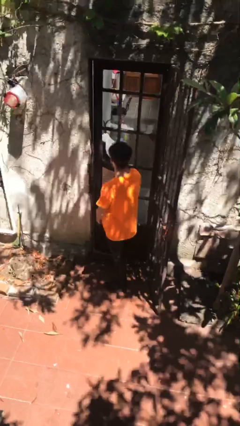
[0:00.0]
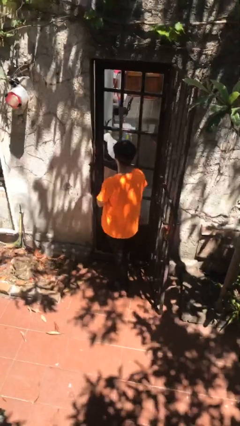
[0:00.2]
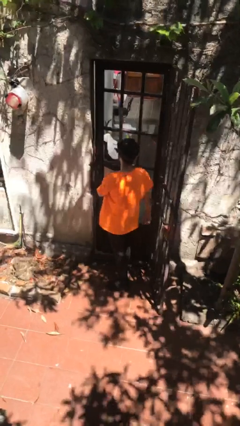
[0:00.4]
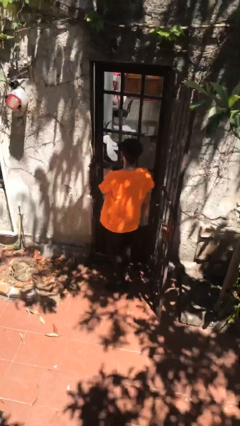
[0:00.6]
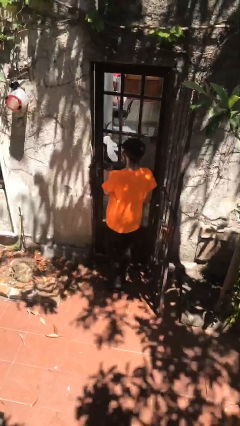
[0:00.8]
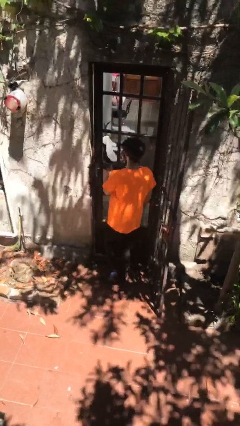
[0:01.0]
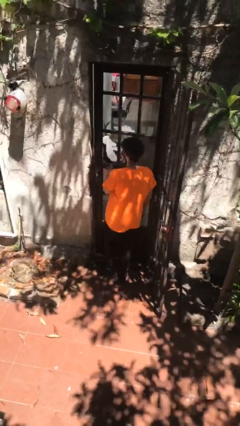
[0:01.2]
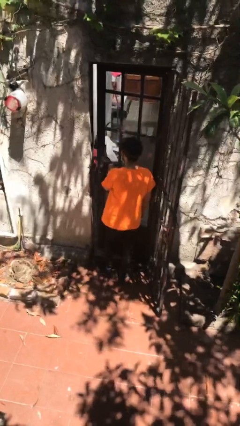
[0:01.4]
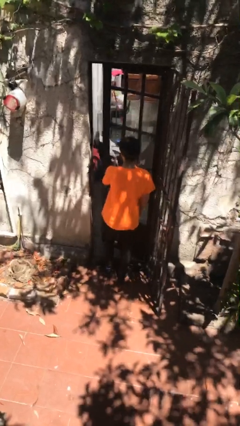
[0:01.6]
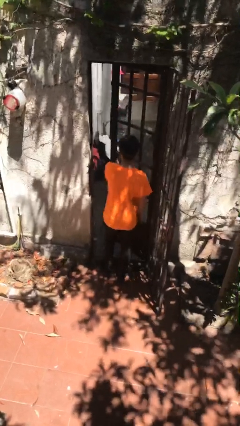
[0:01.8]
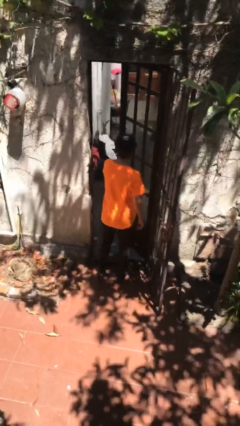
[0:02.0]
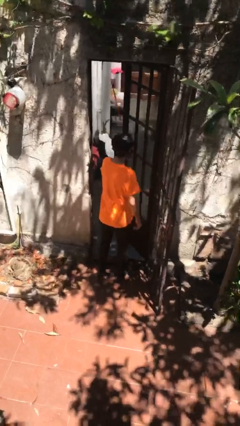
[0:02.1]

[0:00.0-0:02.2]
person opens facility door

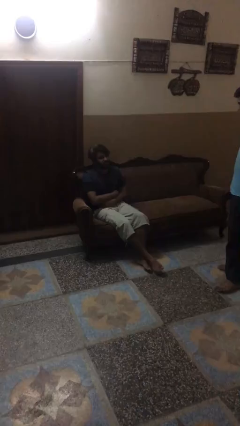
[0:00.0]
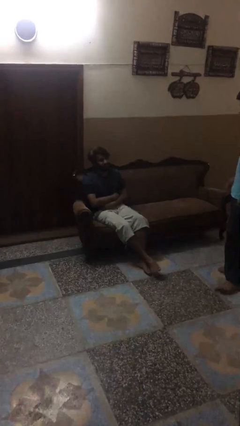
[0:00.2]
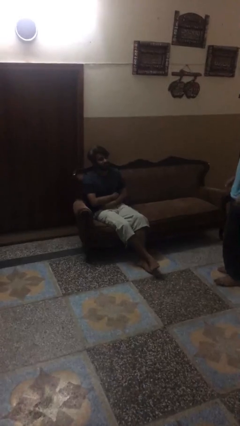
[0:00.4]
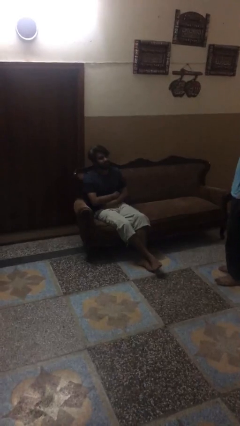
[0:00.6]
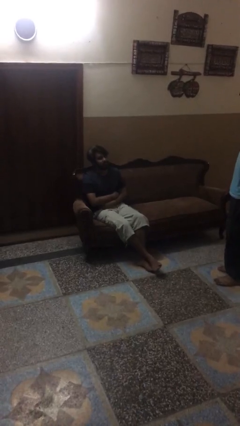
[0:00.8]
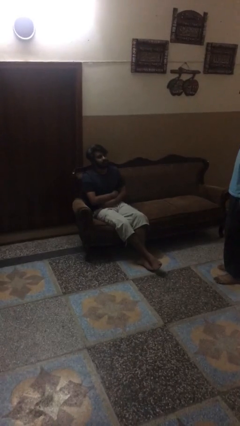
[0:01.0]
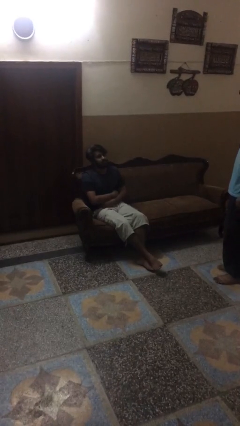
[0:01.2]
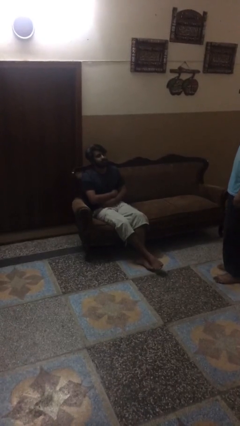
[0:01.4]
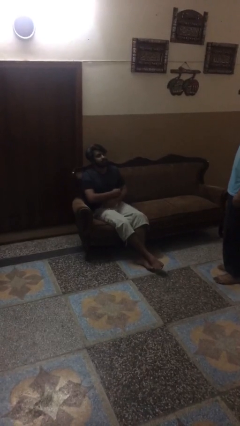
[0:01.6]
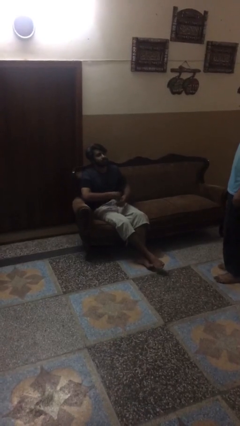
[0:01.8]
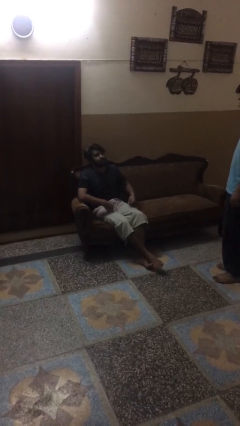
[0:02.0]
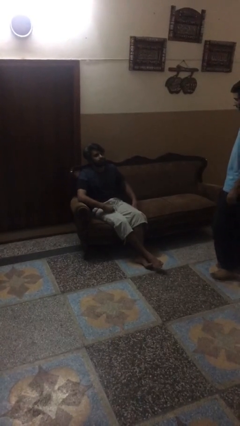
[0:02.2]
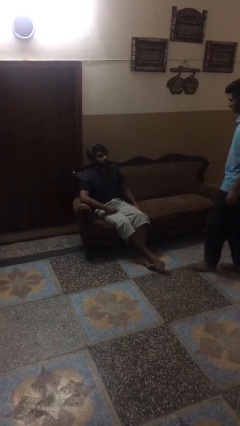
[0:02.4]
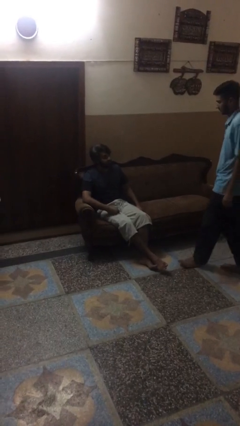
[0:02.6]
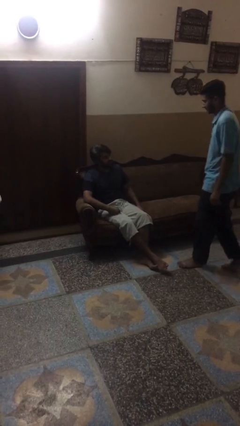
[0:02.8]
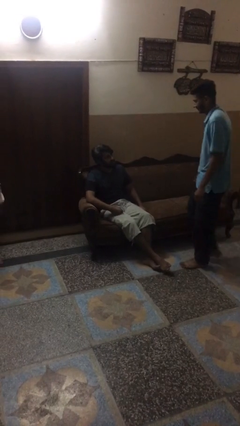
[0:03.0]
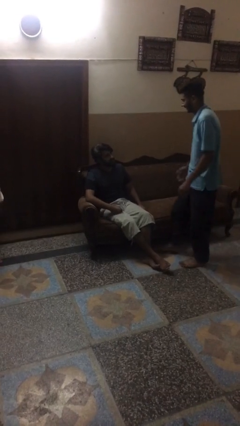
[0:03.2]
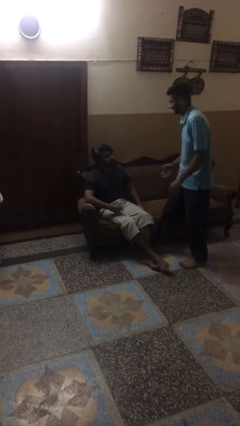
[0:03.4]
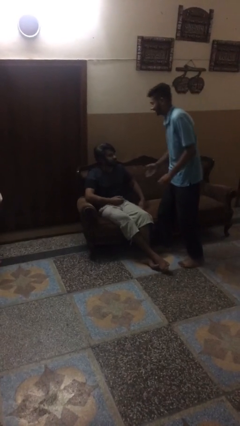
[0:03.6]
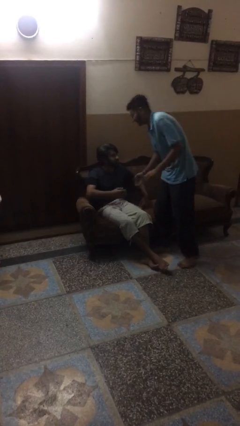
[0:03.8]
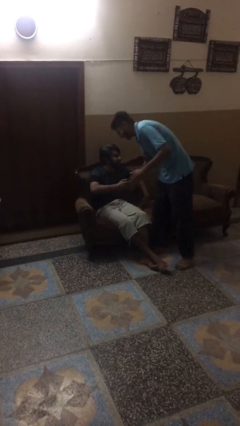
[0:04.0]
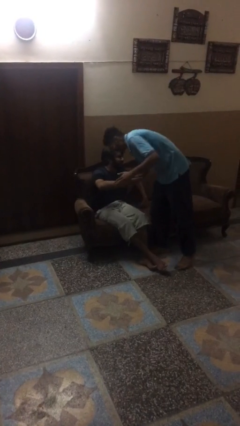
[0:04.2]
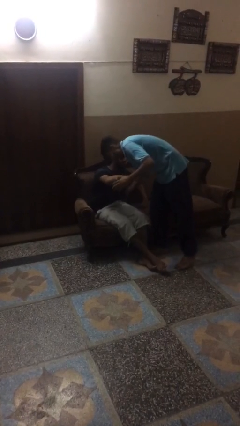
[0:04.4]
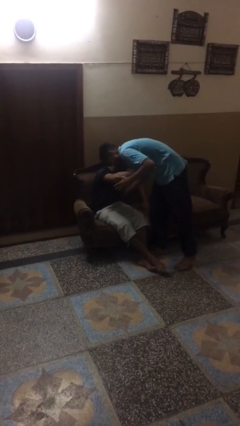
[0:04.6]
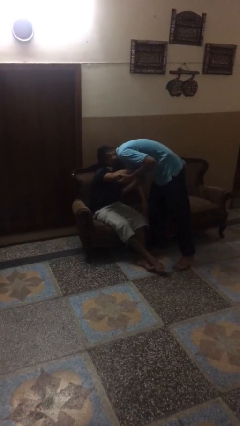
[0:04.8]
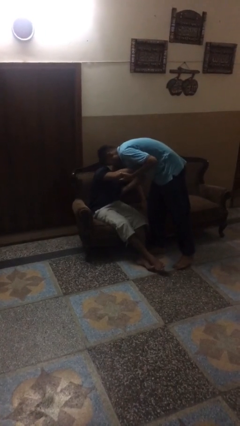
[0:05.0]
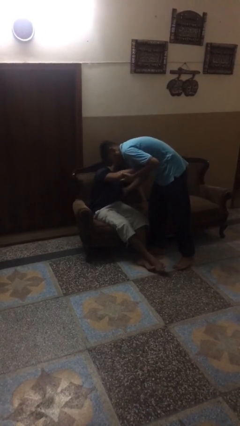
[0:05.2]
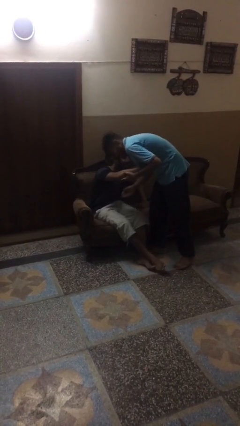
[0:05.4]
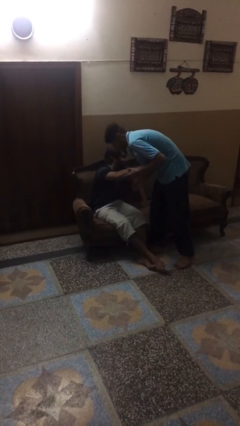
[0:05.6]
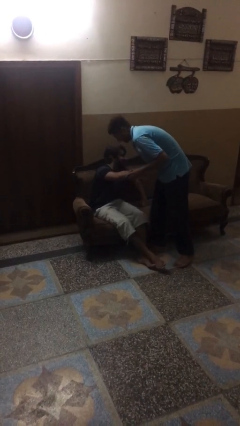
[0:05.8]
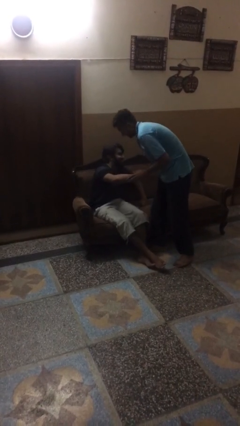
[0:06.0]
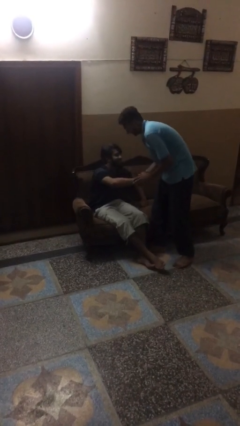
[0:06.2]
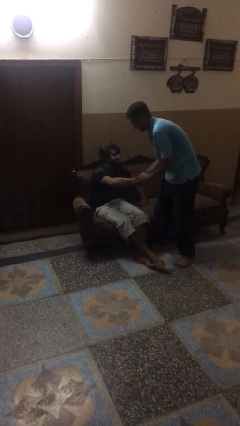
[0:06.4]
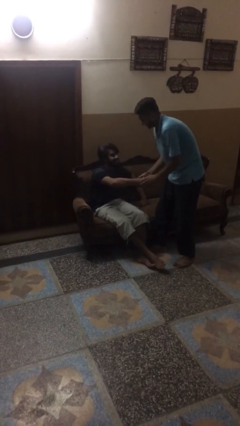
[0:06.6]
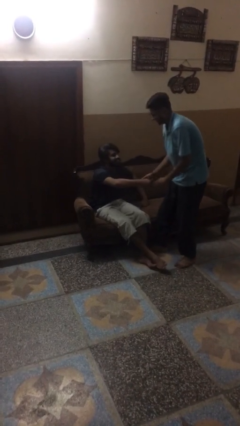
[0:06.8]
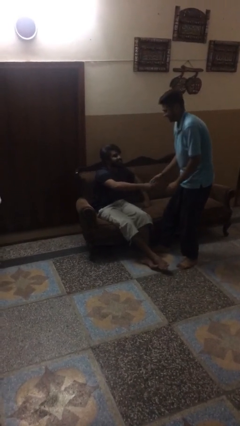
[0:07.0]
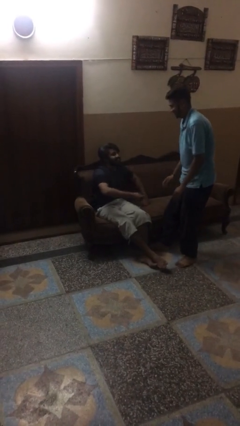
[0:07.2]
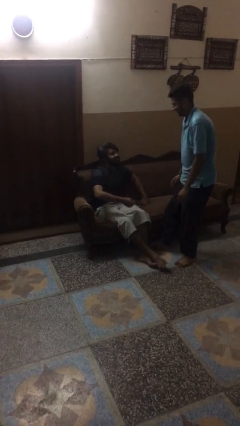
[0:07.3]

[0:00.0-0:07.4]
person embraces person

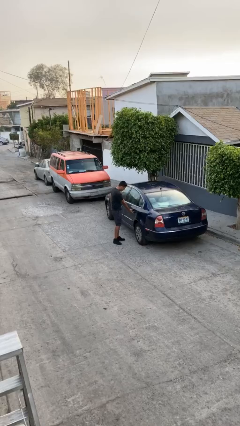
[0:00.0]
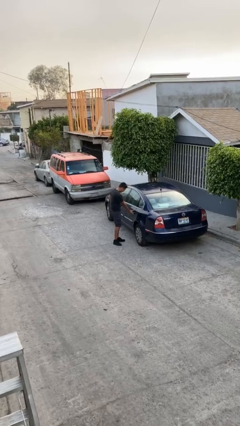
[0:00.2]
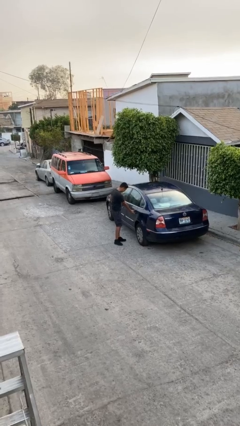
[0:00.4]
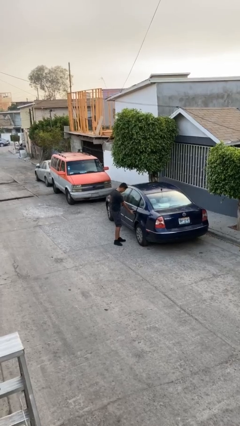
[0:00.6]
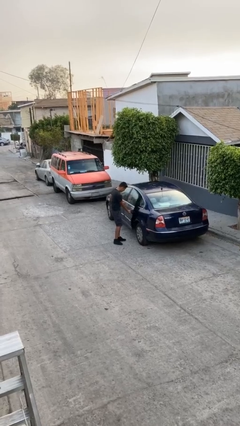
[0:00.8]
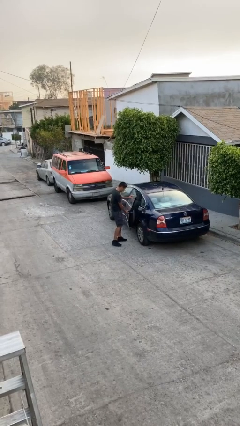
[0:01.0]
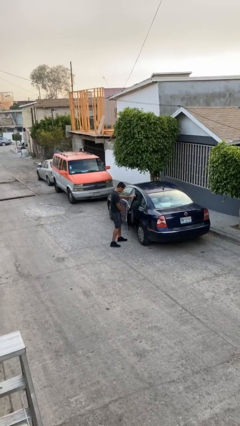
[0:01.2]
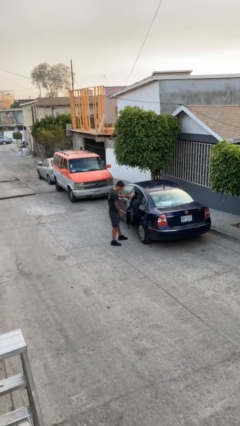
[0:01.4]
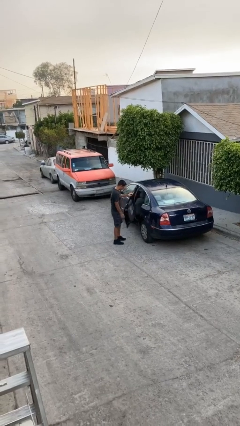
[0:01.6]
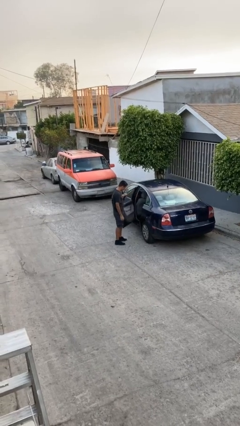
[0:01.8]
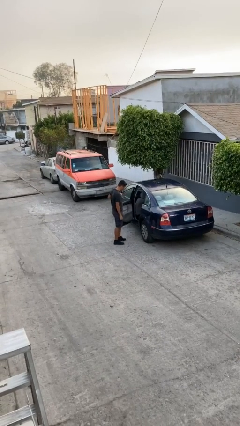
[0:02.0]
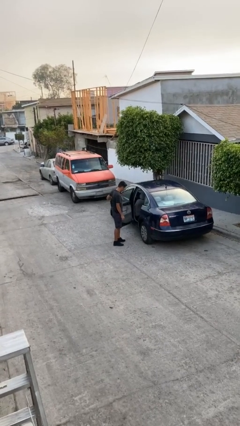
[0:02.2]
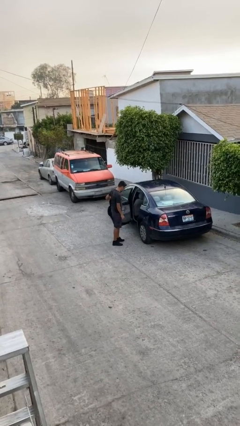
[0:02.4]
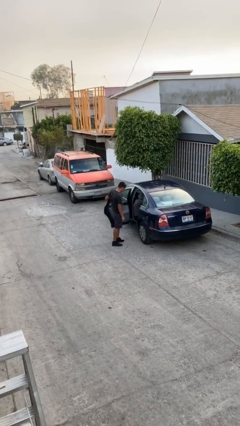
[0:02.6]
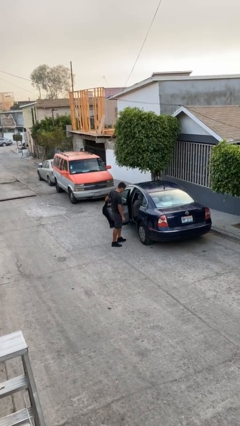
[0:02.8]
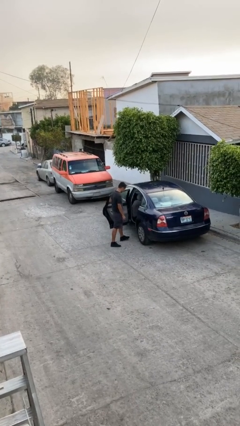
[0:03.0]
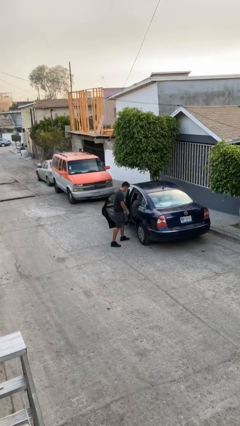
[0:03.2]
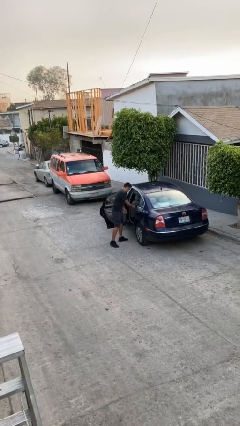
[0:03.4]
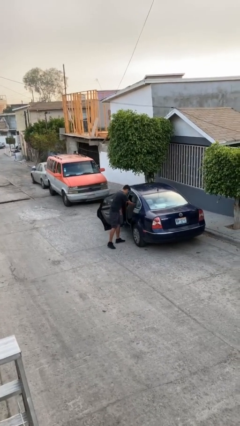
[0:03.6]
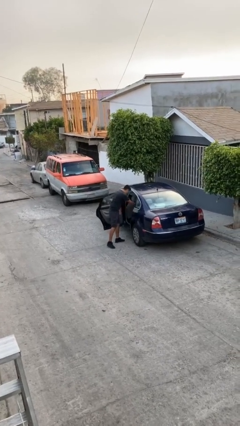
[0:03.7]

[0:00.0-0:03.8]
person opens car door

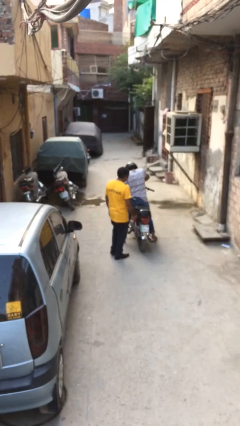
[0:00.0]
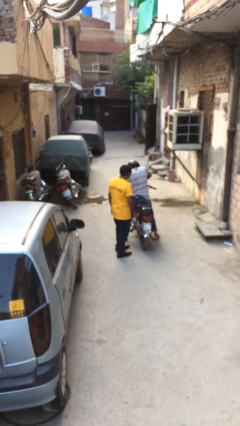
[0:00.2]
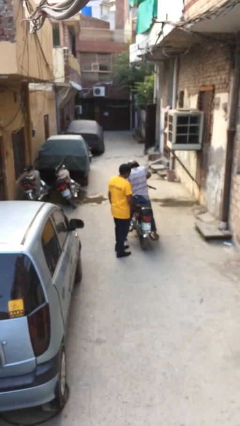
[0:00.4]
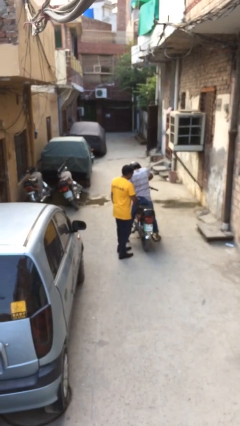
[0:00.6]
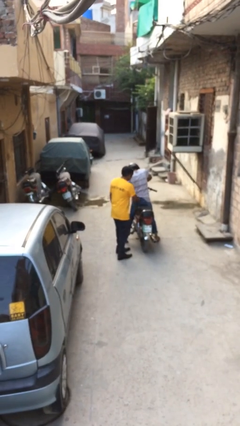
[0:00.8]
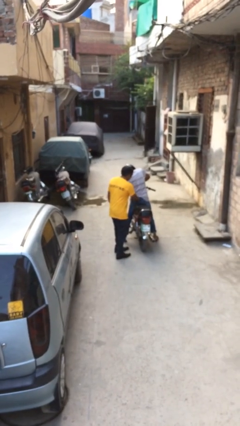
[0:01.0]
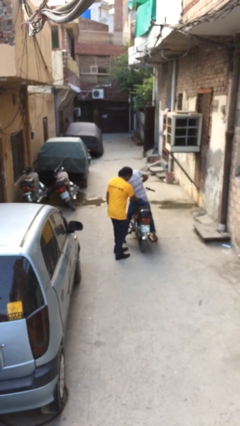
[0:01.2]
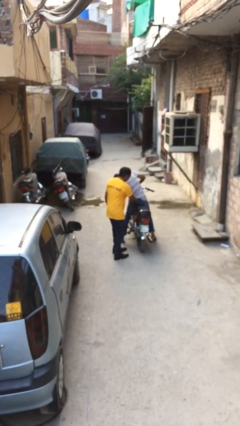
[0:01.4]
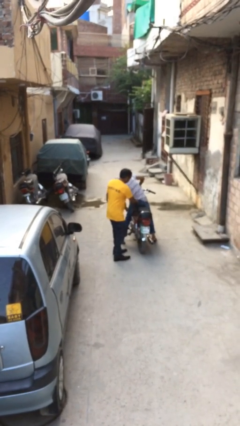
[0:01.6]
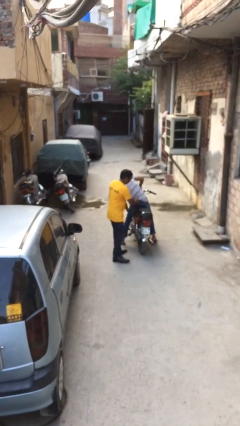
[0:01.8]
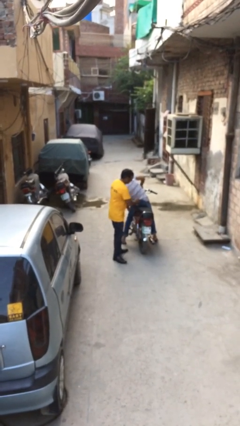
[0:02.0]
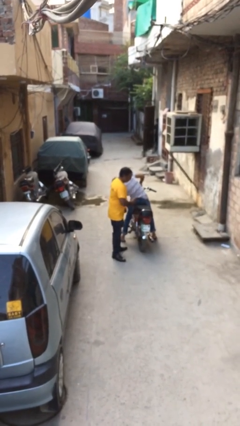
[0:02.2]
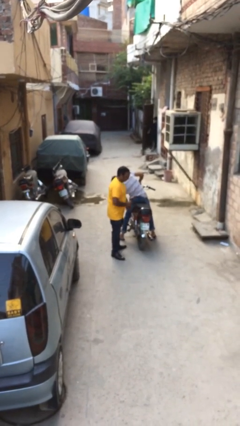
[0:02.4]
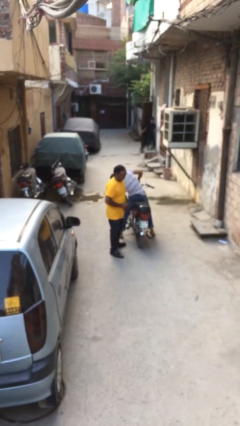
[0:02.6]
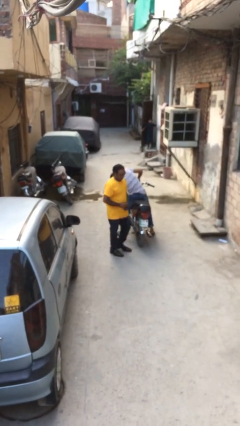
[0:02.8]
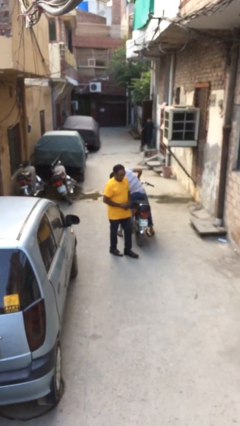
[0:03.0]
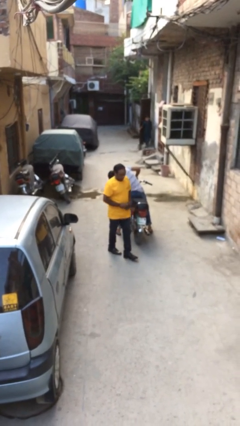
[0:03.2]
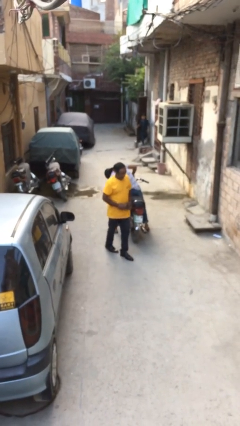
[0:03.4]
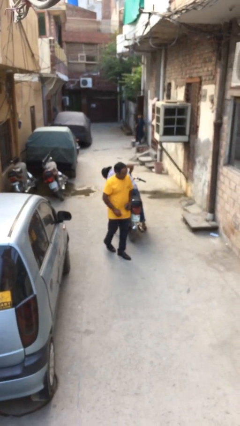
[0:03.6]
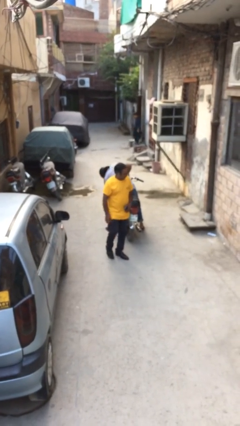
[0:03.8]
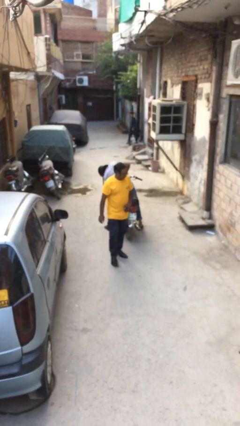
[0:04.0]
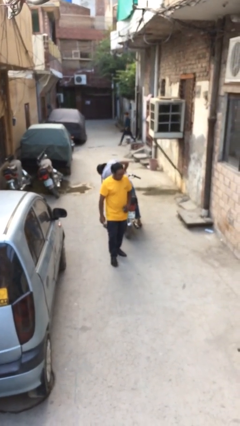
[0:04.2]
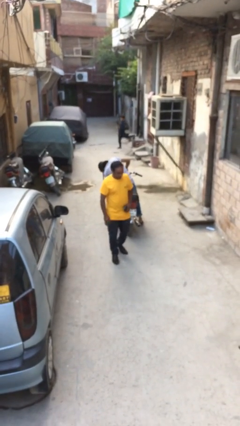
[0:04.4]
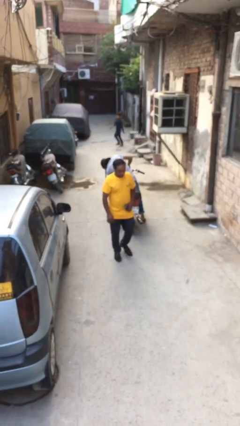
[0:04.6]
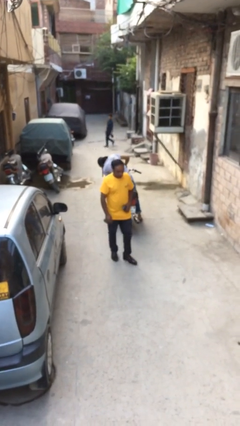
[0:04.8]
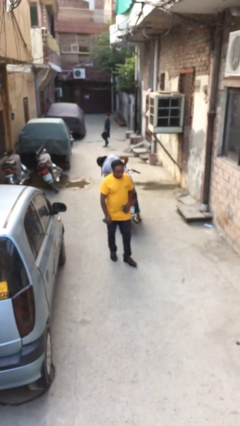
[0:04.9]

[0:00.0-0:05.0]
person steals object from person
